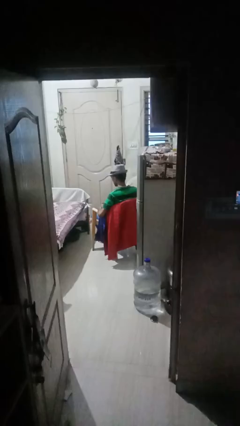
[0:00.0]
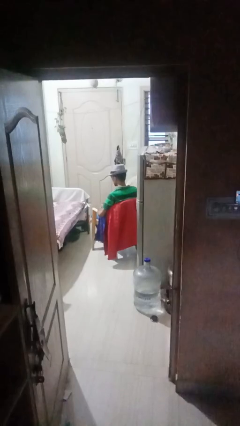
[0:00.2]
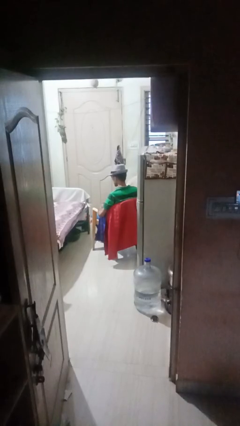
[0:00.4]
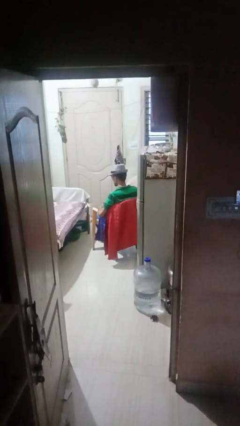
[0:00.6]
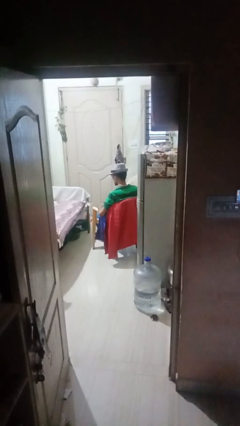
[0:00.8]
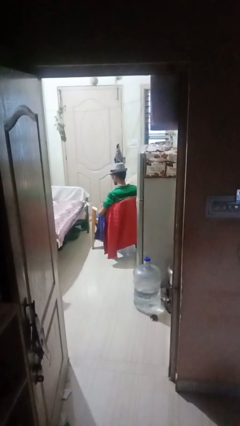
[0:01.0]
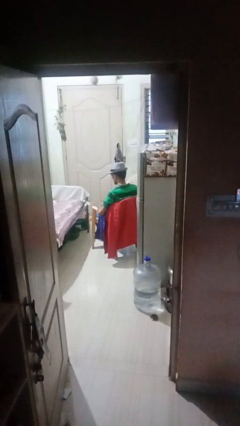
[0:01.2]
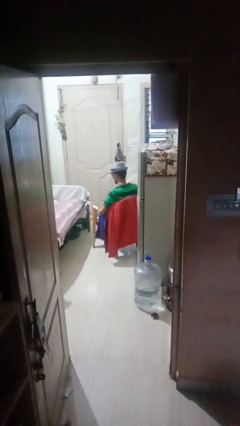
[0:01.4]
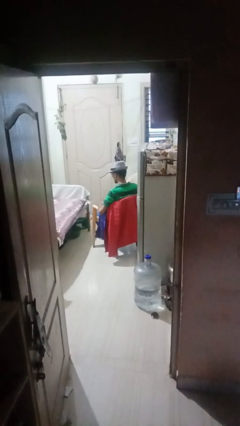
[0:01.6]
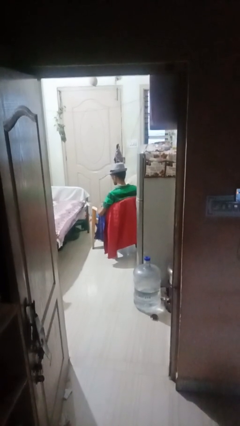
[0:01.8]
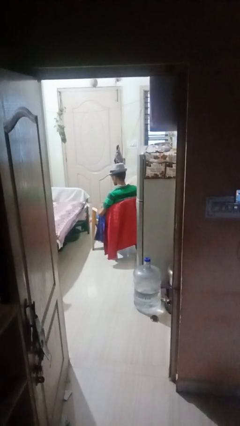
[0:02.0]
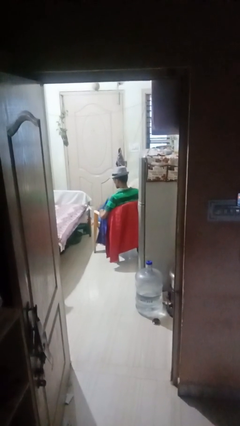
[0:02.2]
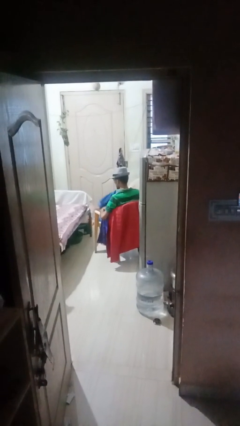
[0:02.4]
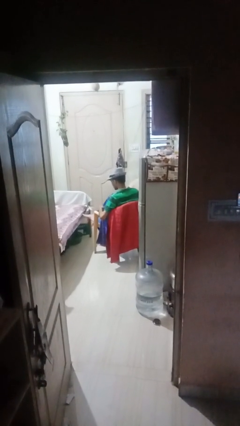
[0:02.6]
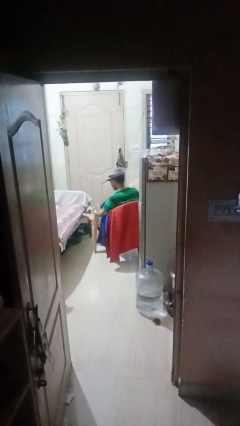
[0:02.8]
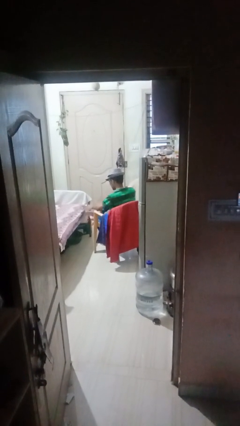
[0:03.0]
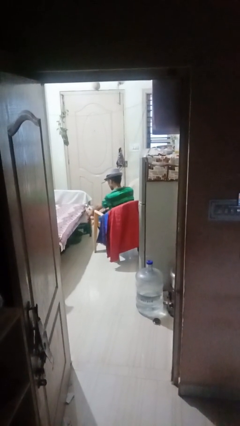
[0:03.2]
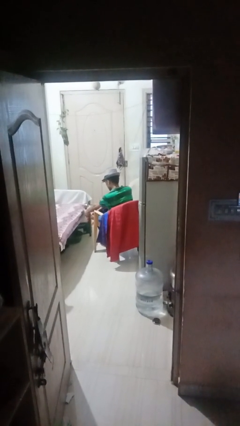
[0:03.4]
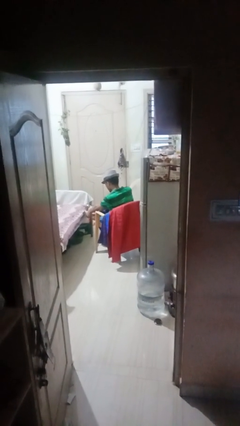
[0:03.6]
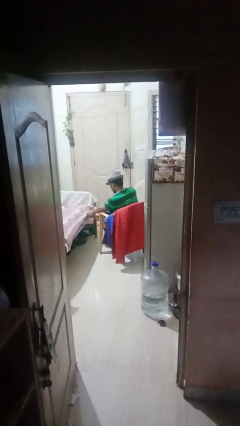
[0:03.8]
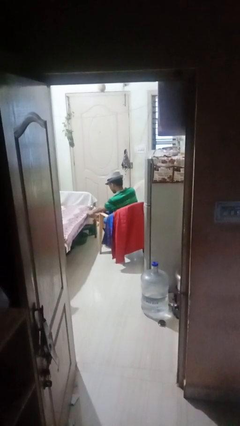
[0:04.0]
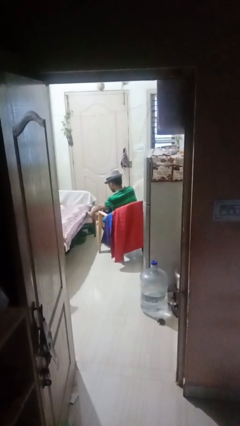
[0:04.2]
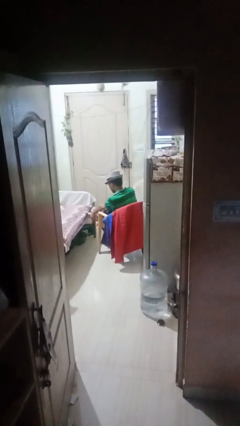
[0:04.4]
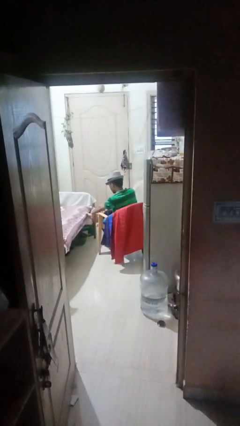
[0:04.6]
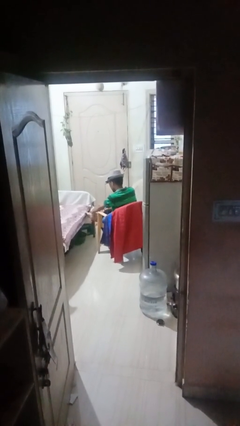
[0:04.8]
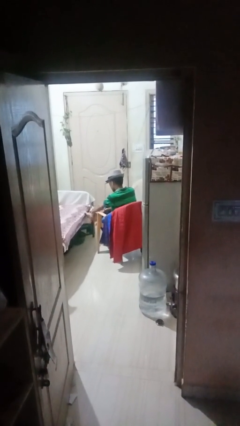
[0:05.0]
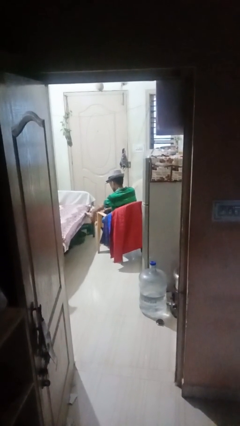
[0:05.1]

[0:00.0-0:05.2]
person rubs foot

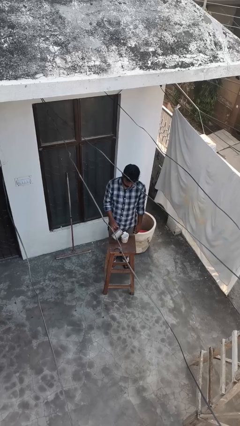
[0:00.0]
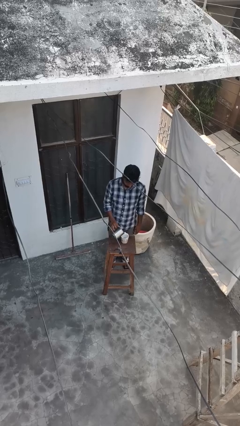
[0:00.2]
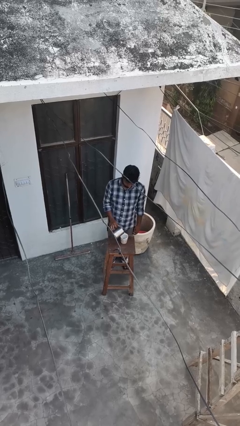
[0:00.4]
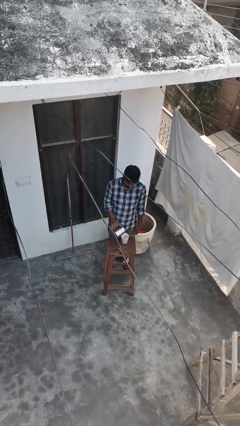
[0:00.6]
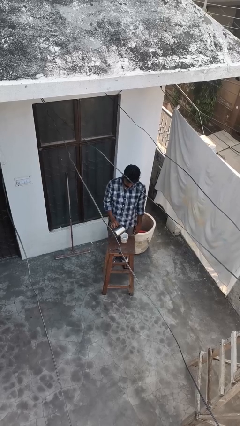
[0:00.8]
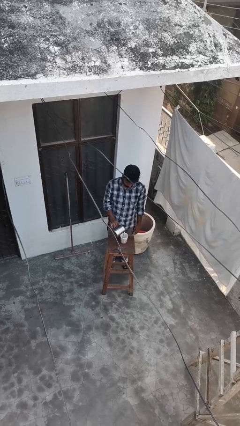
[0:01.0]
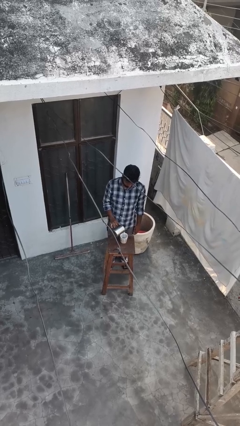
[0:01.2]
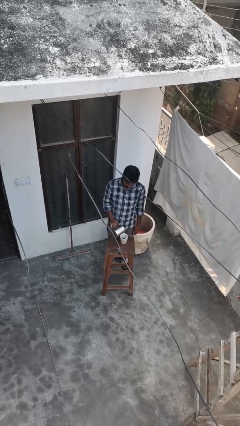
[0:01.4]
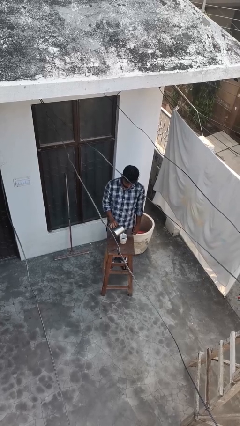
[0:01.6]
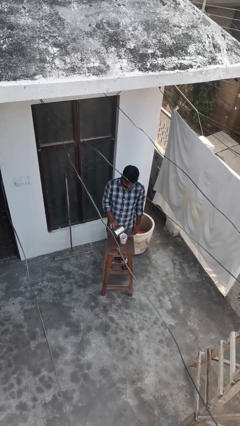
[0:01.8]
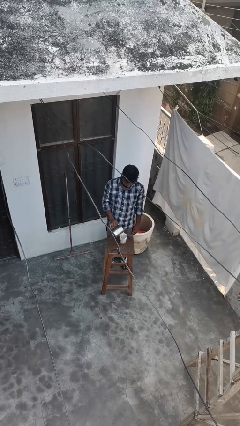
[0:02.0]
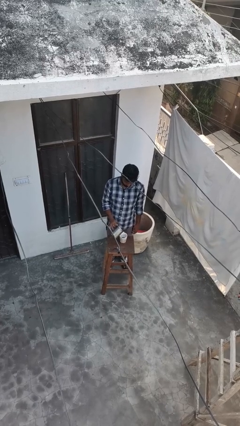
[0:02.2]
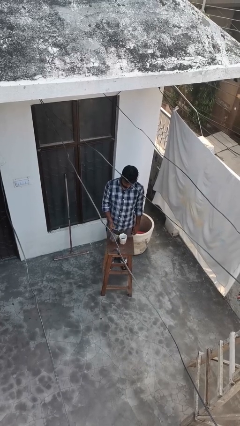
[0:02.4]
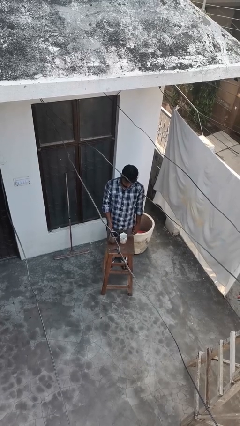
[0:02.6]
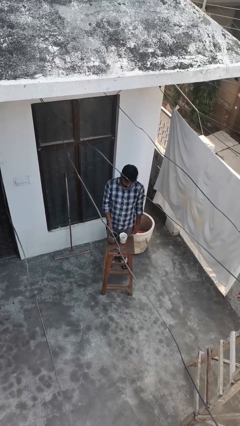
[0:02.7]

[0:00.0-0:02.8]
person pours coffee into mug

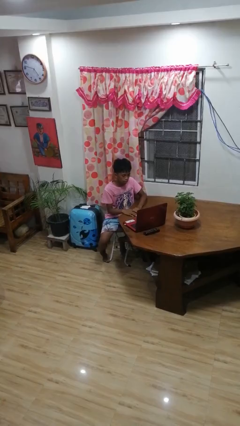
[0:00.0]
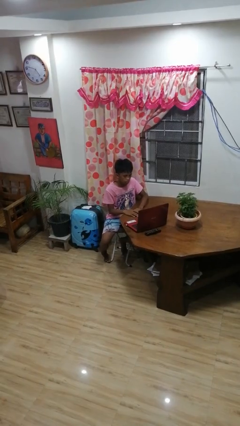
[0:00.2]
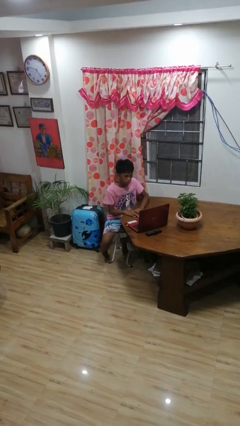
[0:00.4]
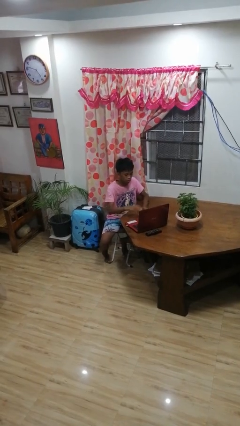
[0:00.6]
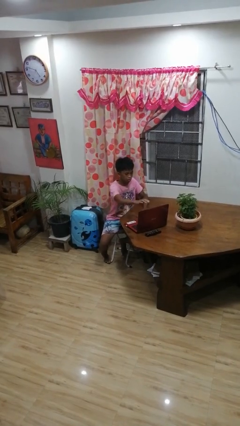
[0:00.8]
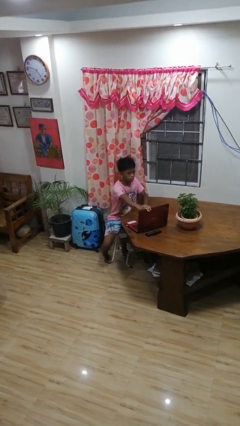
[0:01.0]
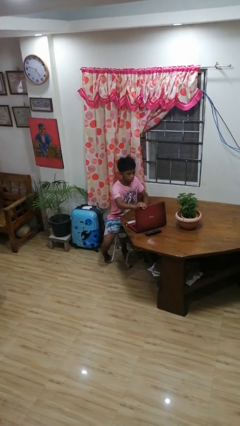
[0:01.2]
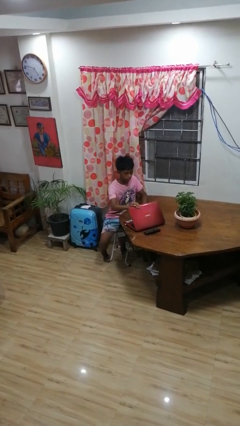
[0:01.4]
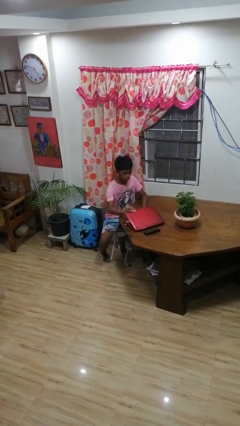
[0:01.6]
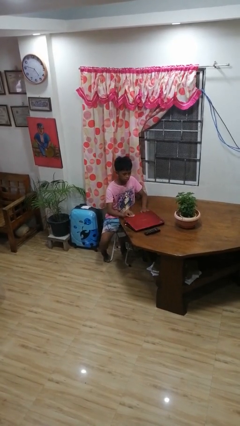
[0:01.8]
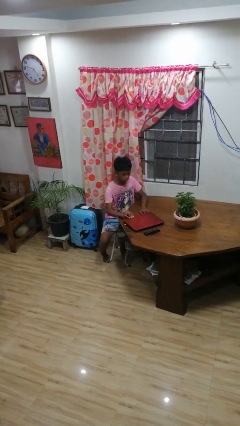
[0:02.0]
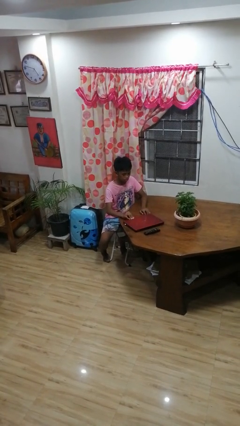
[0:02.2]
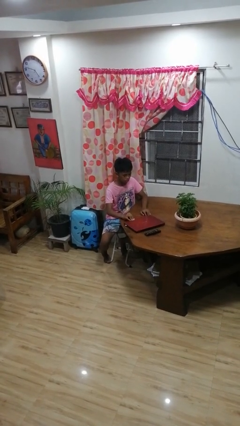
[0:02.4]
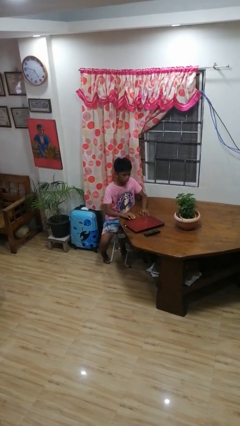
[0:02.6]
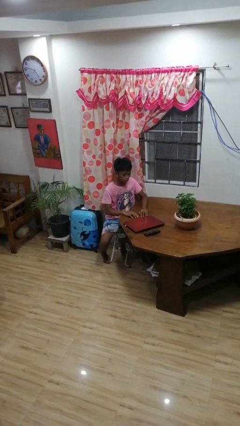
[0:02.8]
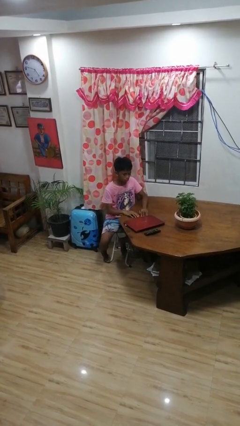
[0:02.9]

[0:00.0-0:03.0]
person closes laptop

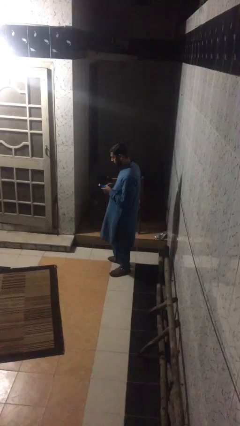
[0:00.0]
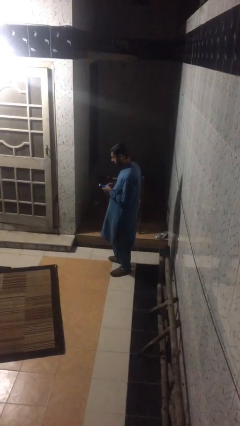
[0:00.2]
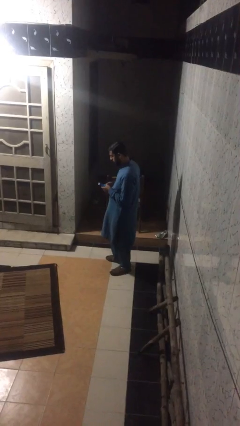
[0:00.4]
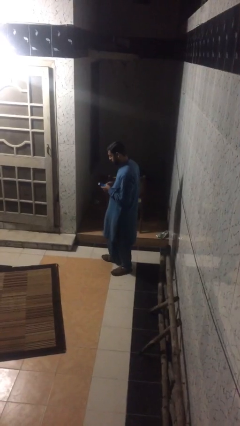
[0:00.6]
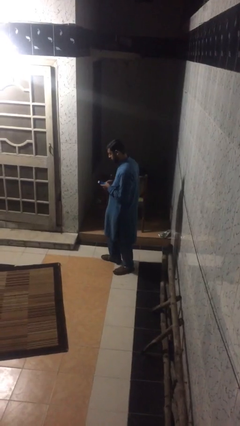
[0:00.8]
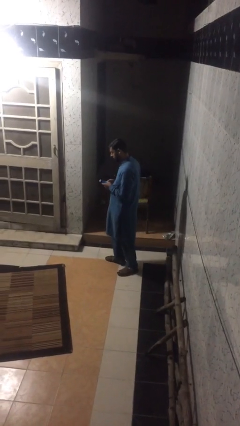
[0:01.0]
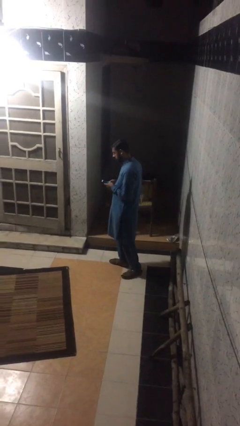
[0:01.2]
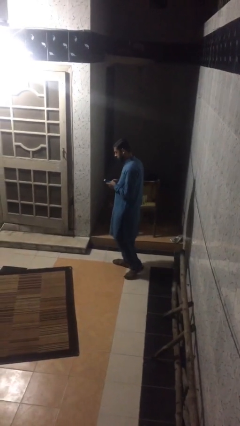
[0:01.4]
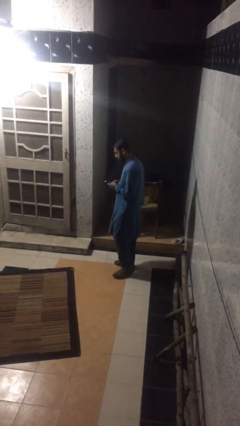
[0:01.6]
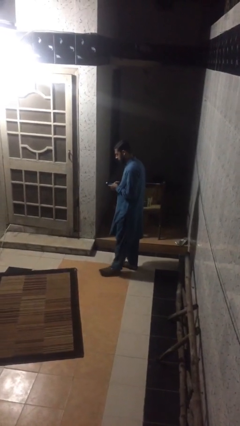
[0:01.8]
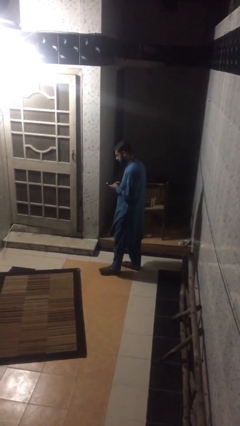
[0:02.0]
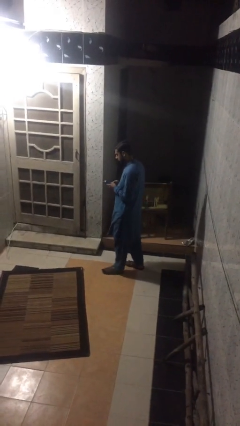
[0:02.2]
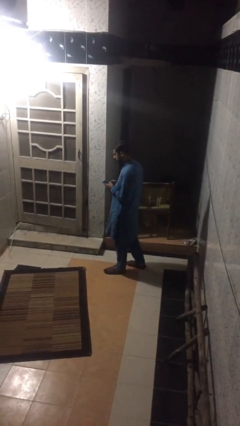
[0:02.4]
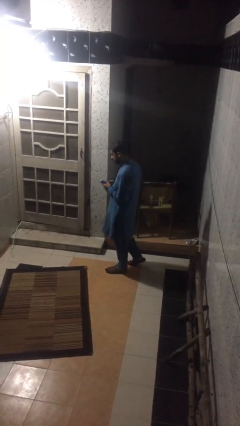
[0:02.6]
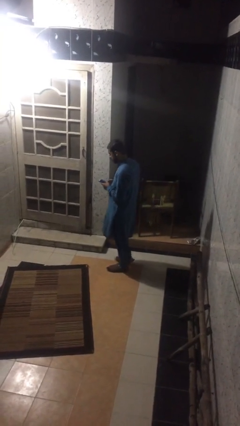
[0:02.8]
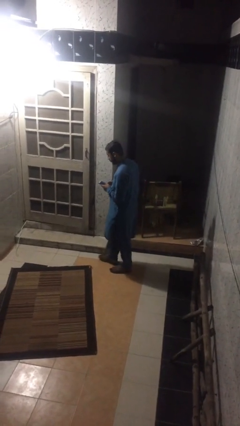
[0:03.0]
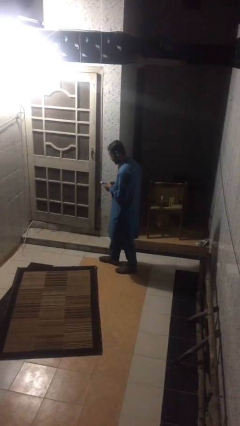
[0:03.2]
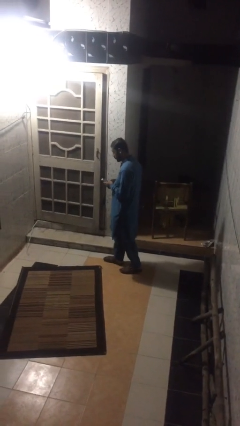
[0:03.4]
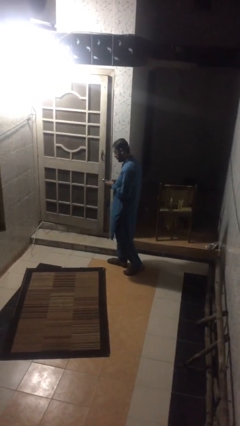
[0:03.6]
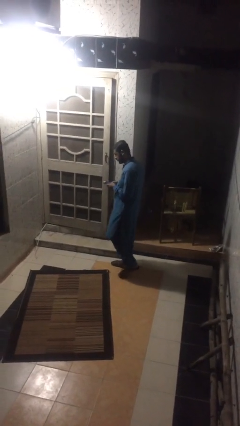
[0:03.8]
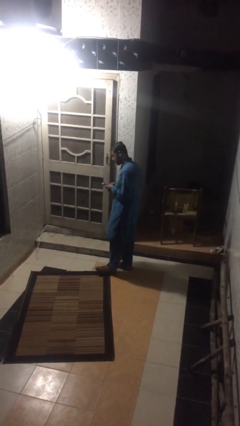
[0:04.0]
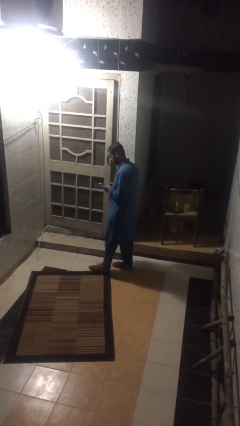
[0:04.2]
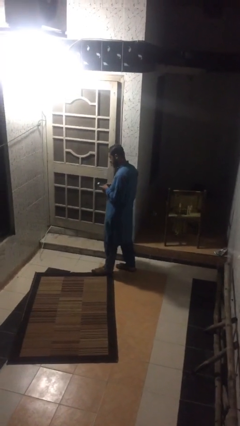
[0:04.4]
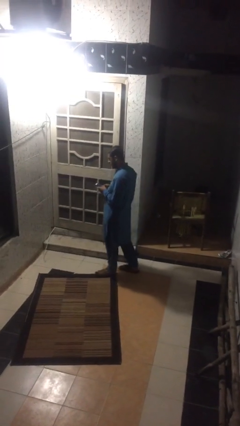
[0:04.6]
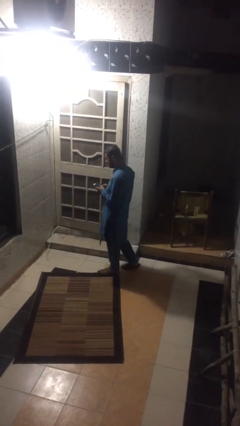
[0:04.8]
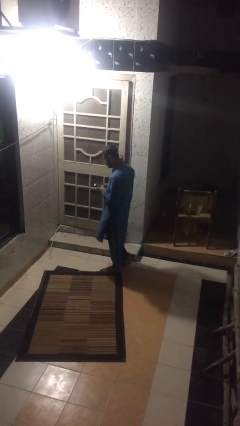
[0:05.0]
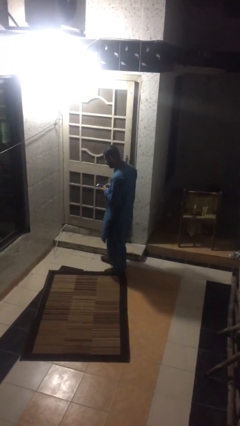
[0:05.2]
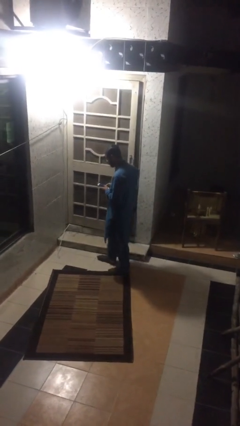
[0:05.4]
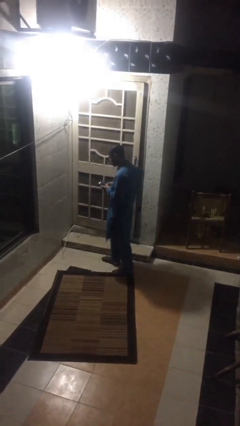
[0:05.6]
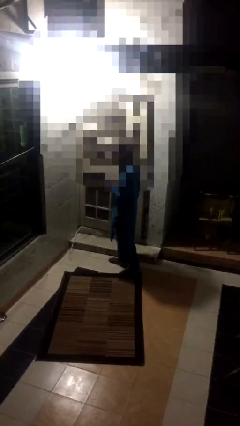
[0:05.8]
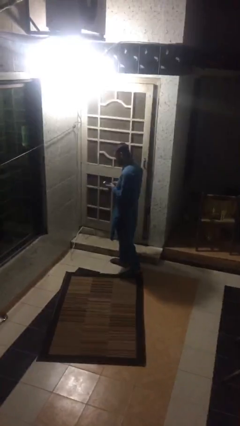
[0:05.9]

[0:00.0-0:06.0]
person texts on phone

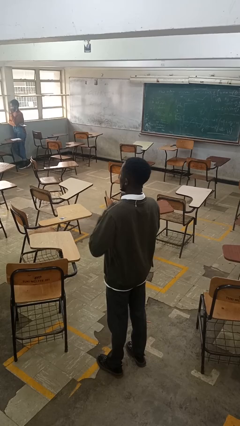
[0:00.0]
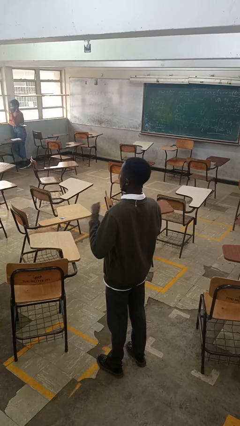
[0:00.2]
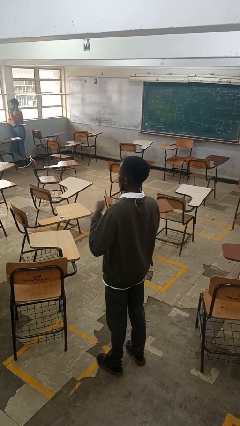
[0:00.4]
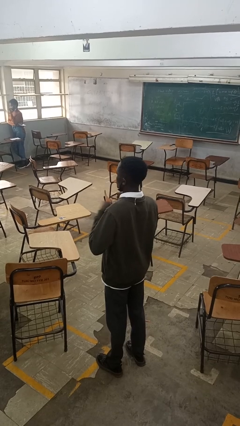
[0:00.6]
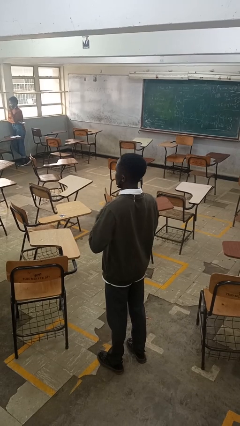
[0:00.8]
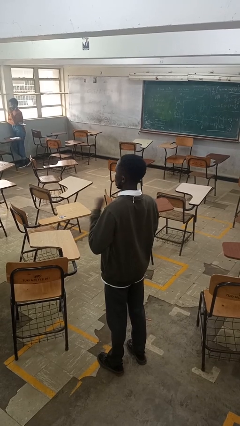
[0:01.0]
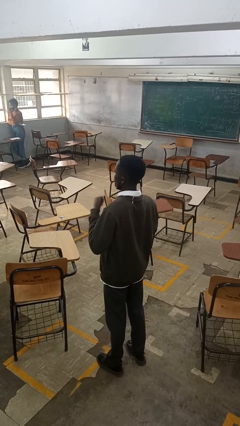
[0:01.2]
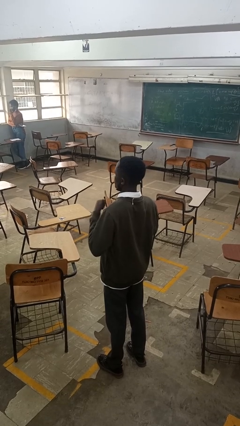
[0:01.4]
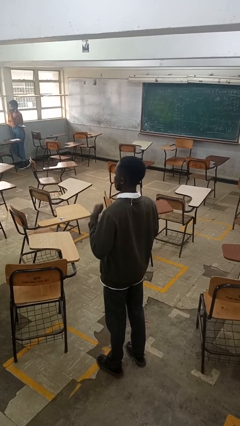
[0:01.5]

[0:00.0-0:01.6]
person drums on chest
